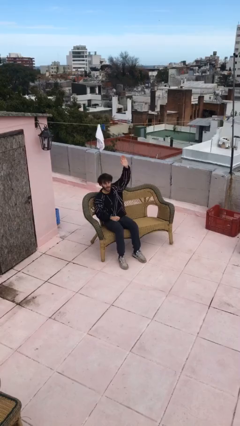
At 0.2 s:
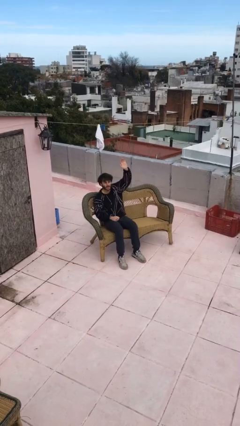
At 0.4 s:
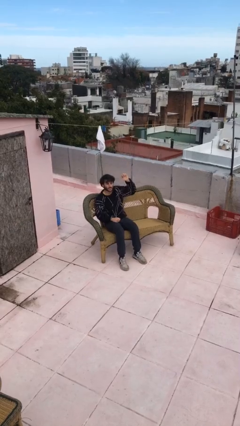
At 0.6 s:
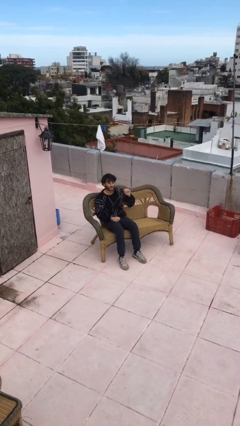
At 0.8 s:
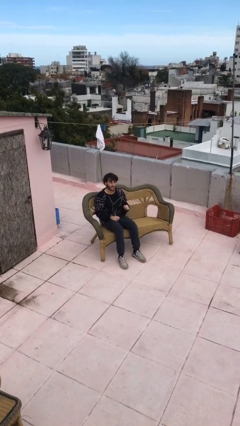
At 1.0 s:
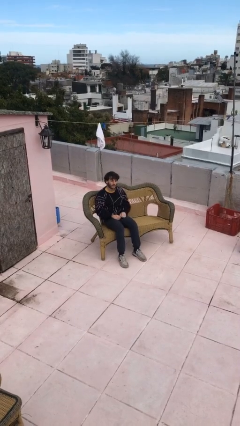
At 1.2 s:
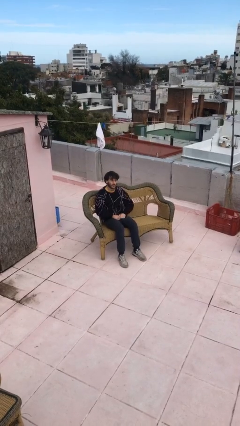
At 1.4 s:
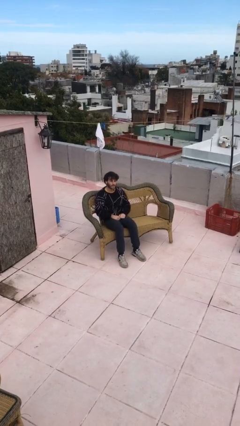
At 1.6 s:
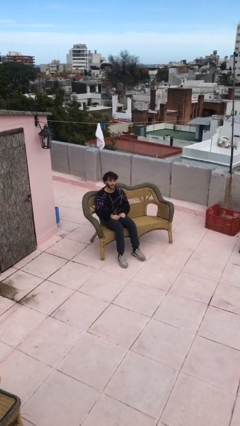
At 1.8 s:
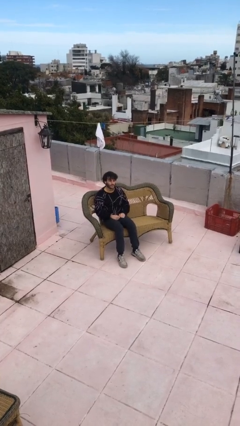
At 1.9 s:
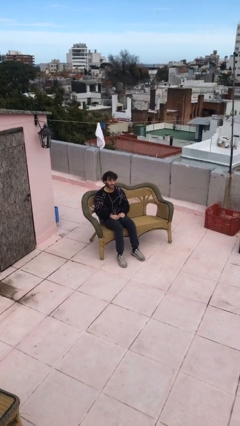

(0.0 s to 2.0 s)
person gestures lower hand

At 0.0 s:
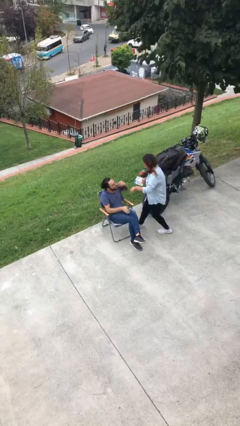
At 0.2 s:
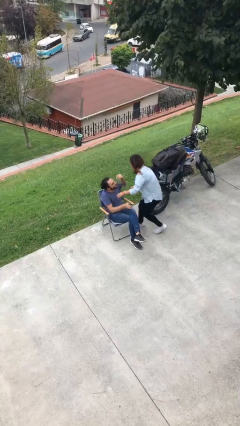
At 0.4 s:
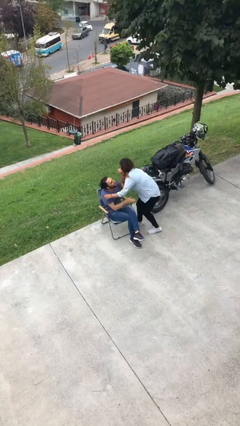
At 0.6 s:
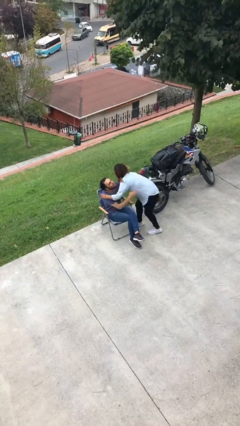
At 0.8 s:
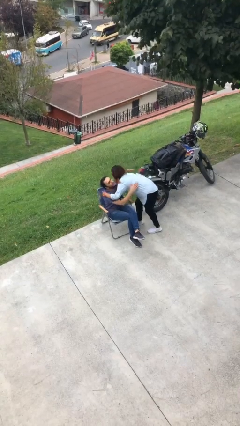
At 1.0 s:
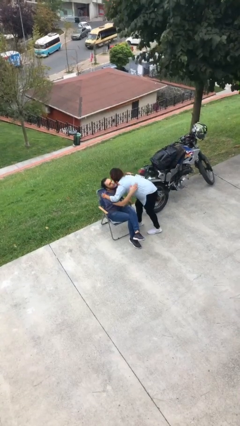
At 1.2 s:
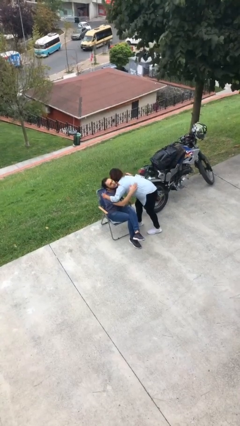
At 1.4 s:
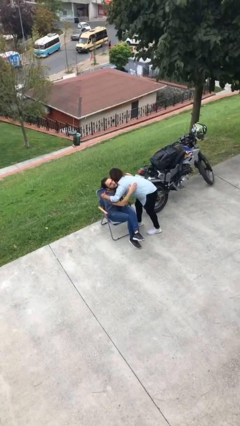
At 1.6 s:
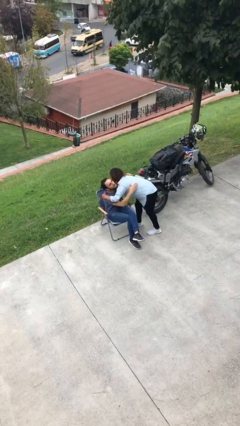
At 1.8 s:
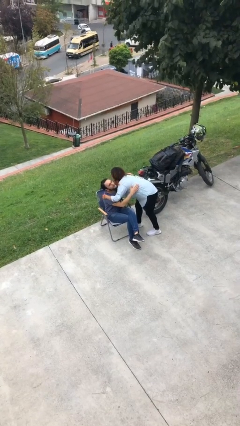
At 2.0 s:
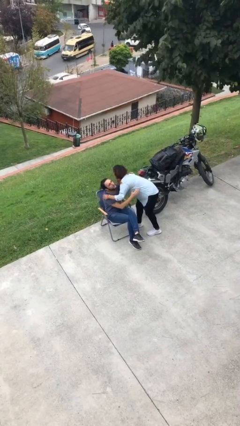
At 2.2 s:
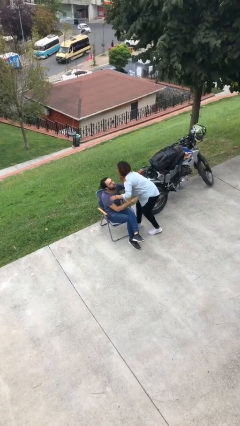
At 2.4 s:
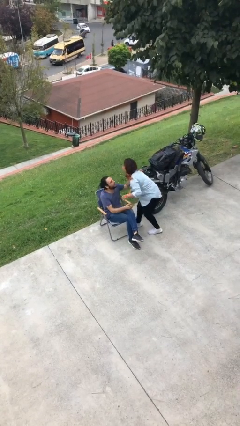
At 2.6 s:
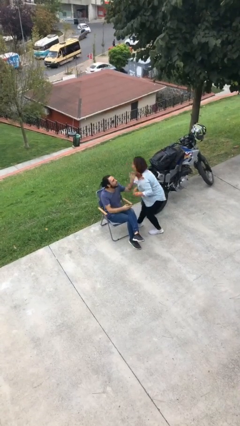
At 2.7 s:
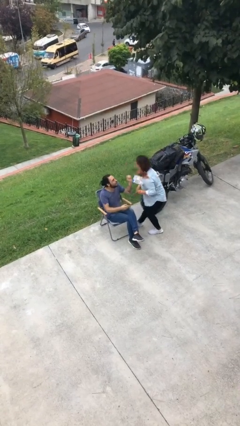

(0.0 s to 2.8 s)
person embraces person

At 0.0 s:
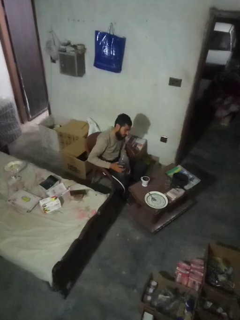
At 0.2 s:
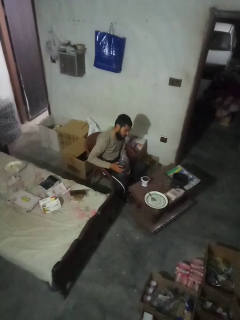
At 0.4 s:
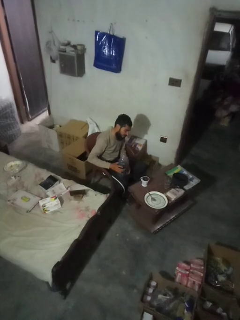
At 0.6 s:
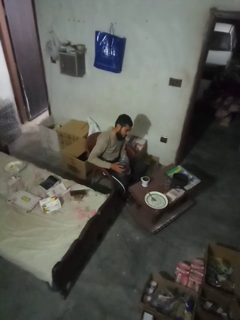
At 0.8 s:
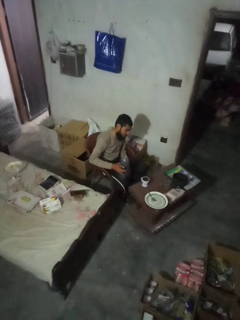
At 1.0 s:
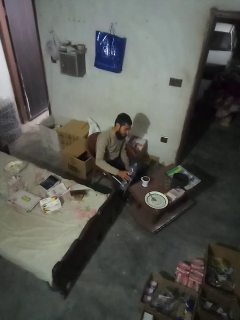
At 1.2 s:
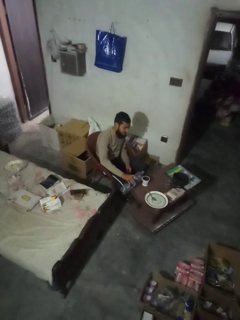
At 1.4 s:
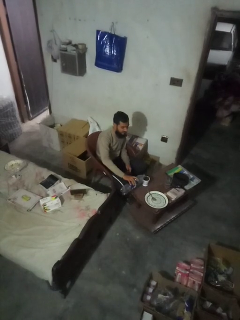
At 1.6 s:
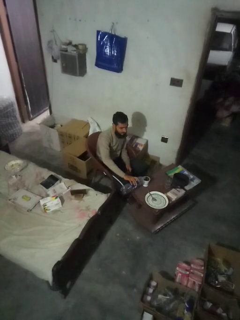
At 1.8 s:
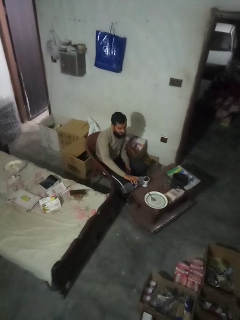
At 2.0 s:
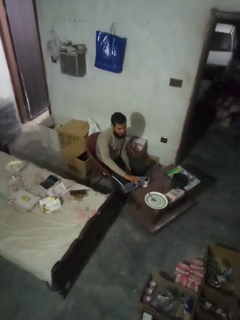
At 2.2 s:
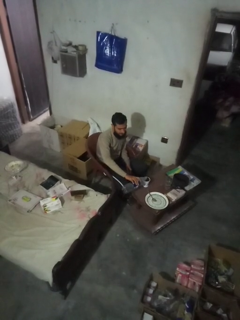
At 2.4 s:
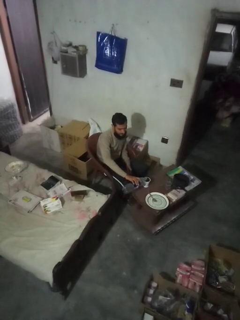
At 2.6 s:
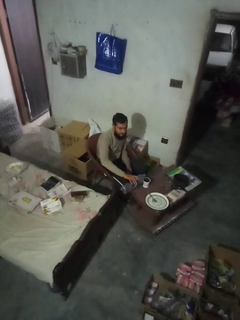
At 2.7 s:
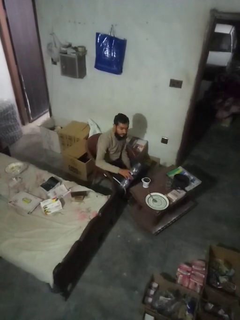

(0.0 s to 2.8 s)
person pours liquid into cup

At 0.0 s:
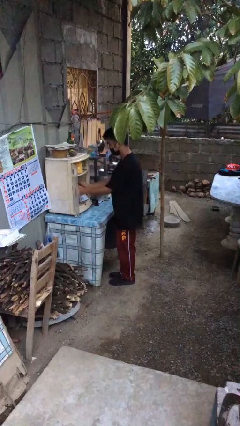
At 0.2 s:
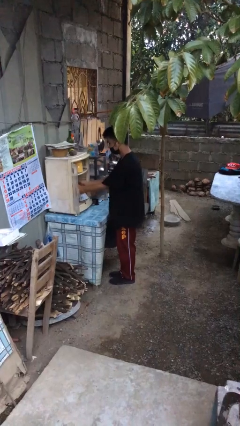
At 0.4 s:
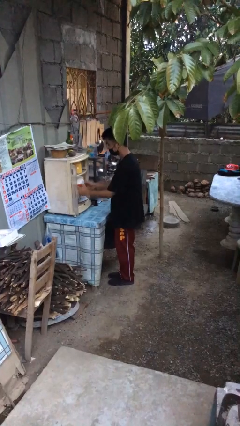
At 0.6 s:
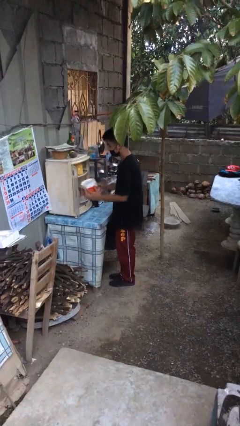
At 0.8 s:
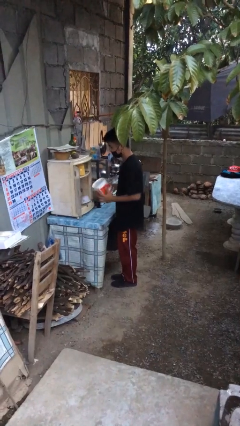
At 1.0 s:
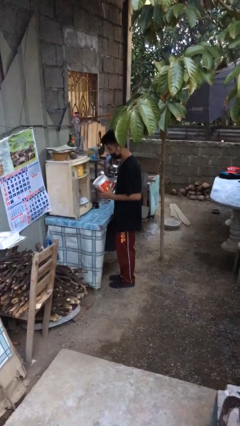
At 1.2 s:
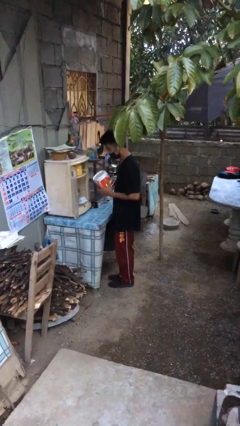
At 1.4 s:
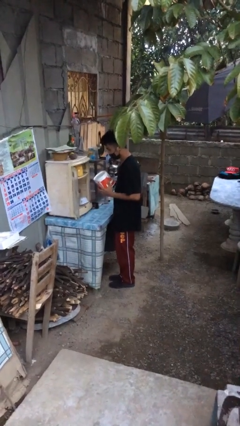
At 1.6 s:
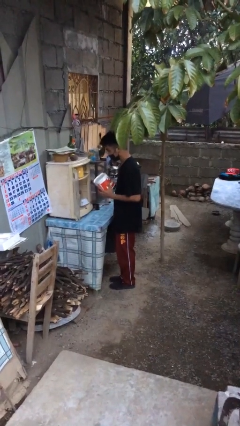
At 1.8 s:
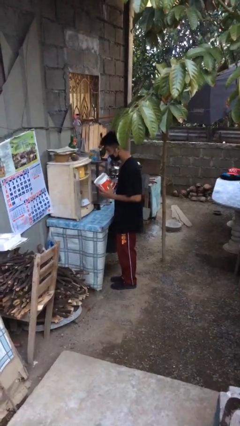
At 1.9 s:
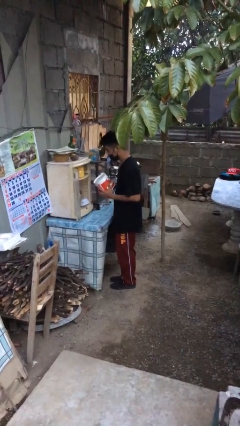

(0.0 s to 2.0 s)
person picks up object from cabinet

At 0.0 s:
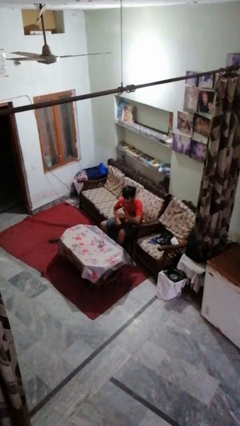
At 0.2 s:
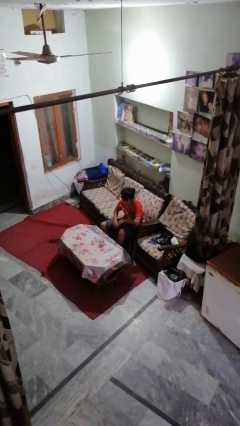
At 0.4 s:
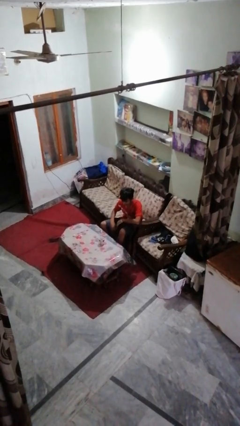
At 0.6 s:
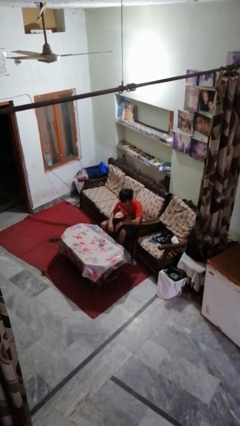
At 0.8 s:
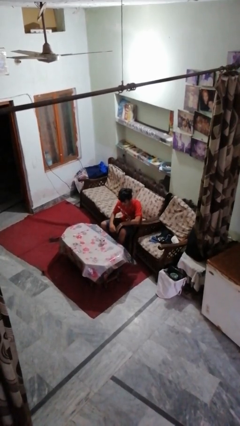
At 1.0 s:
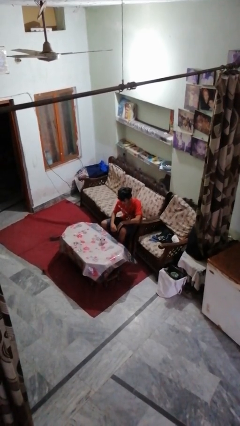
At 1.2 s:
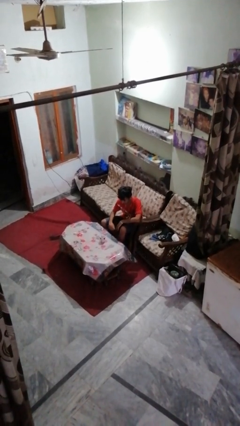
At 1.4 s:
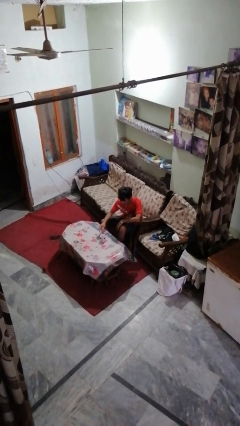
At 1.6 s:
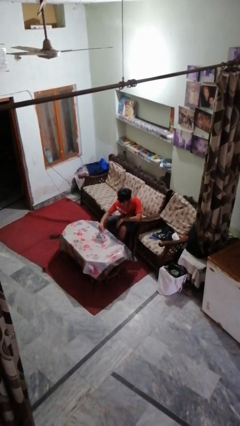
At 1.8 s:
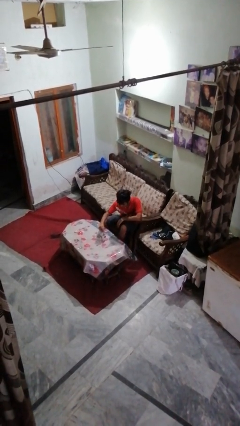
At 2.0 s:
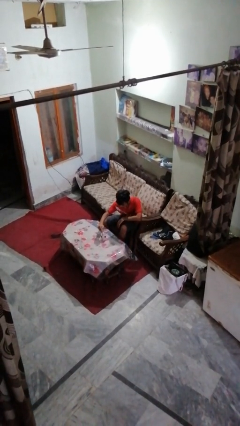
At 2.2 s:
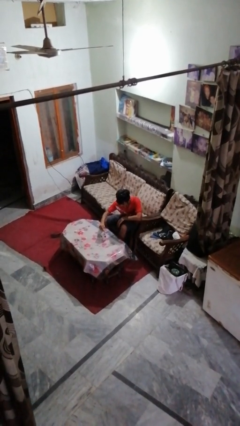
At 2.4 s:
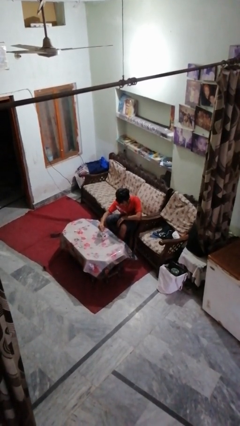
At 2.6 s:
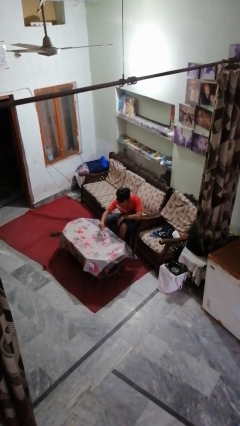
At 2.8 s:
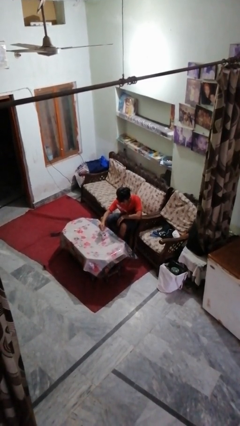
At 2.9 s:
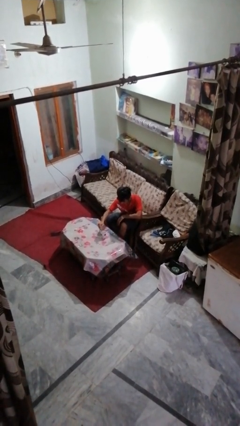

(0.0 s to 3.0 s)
person stirs mug

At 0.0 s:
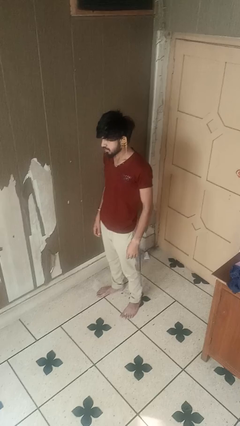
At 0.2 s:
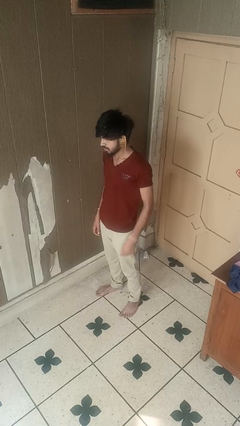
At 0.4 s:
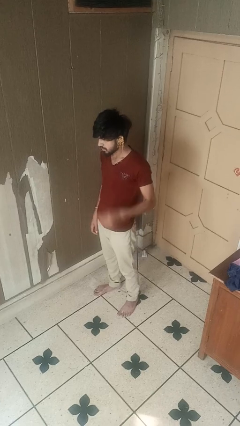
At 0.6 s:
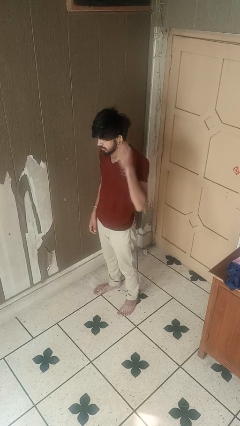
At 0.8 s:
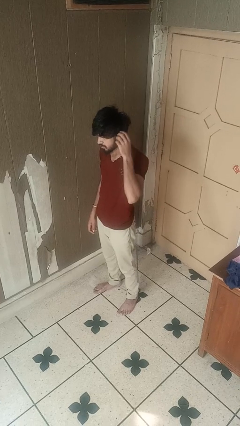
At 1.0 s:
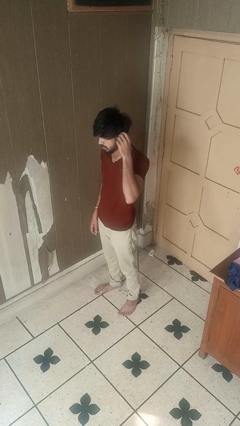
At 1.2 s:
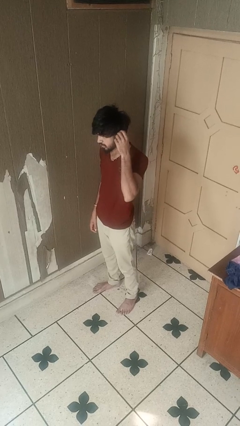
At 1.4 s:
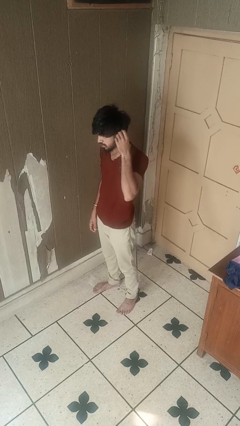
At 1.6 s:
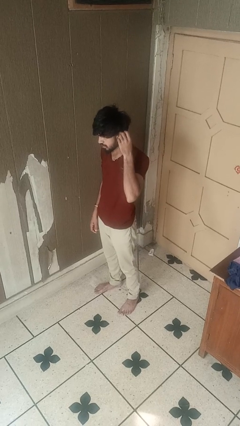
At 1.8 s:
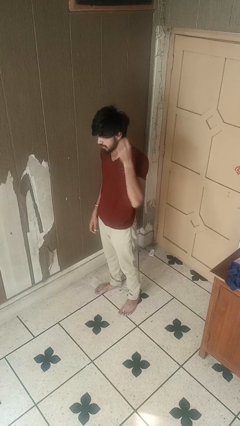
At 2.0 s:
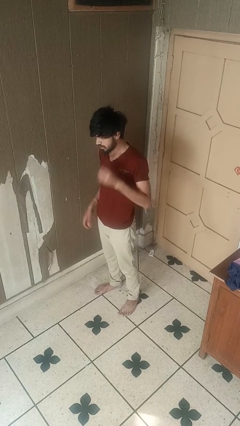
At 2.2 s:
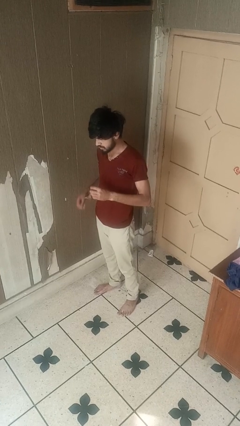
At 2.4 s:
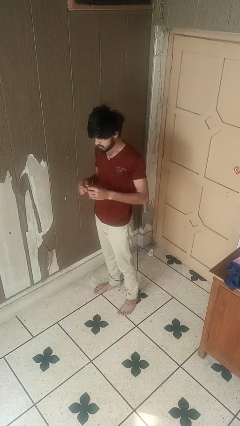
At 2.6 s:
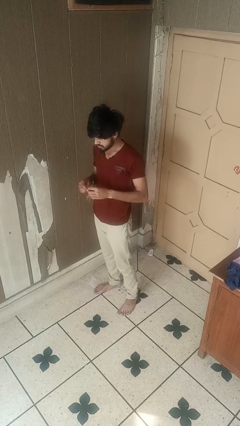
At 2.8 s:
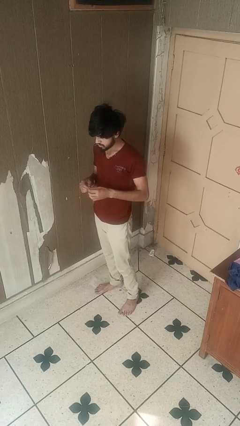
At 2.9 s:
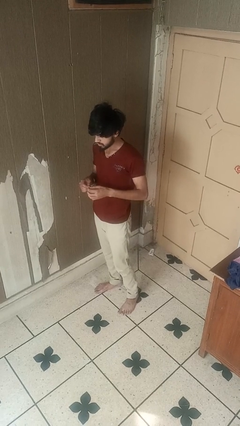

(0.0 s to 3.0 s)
person takes off earrings

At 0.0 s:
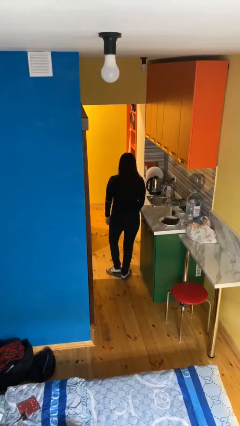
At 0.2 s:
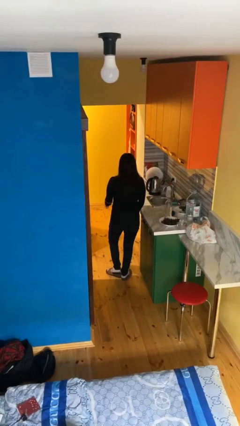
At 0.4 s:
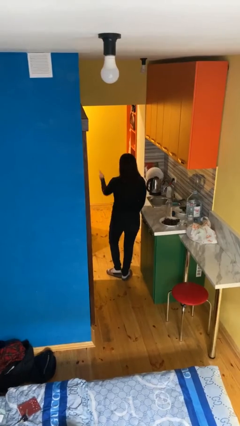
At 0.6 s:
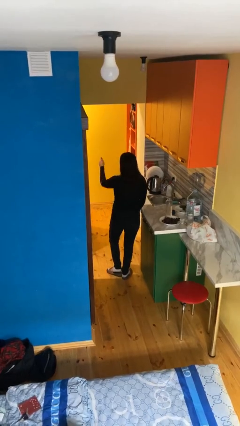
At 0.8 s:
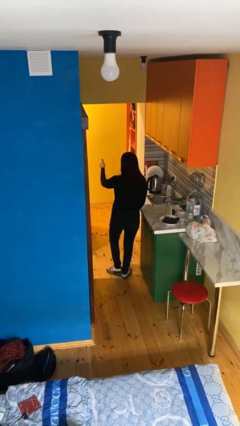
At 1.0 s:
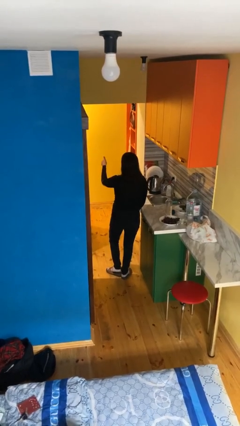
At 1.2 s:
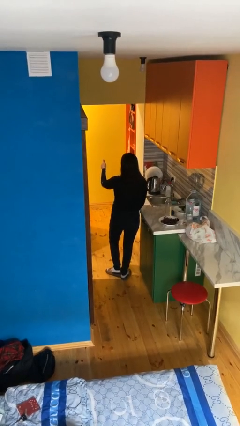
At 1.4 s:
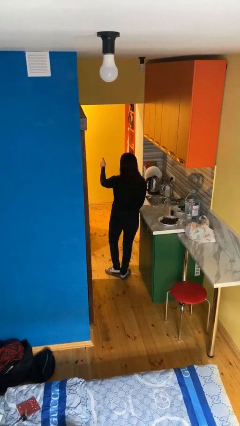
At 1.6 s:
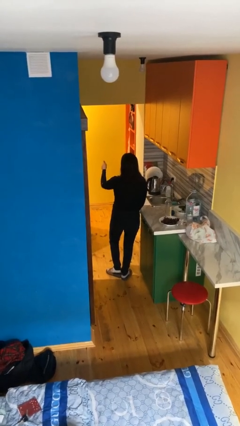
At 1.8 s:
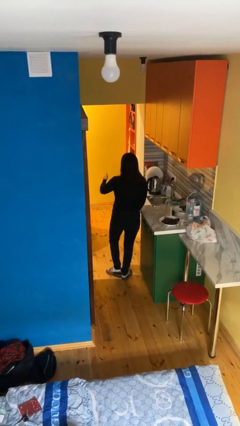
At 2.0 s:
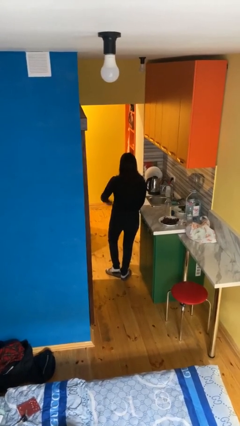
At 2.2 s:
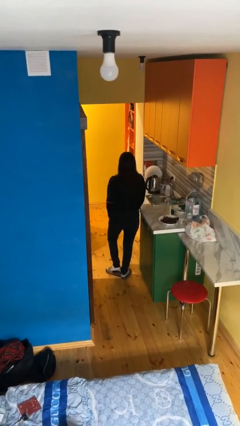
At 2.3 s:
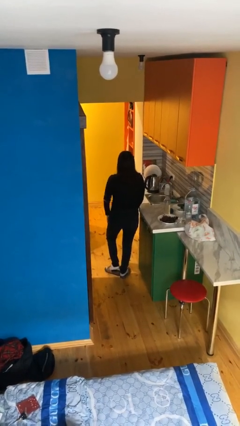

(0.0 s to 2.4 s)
person gestures thumbs up
